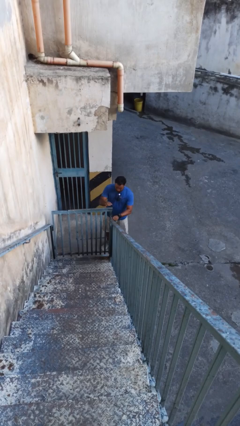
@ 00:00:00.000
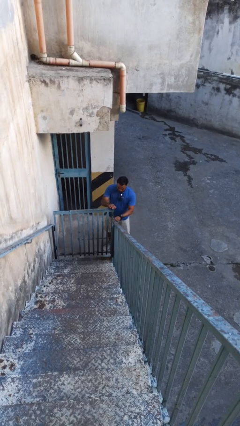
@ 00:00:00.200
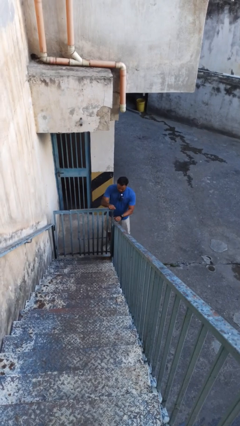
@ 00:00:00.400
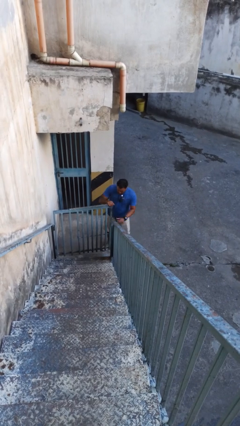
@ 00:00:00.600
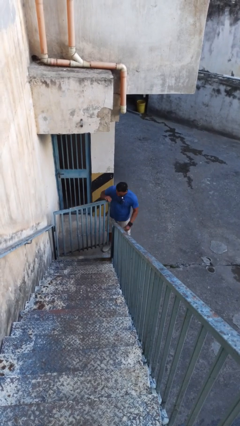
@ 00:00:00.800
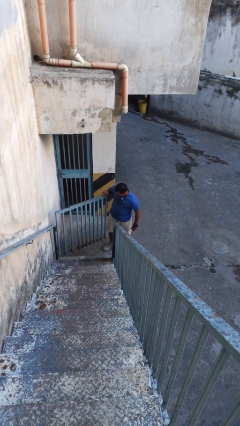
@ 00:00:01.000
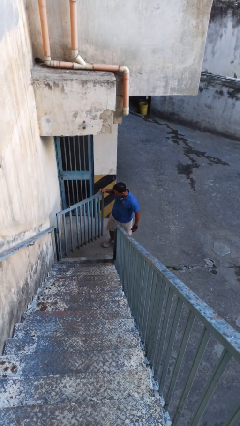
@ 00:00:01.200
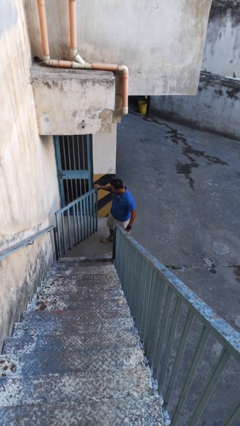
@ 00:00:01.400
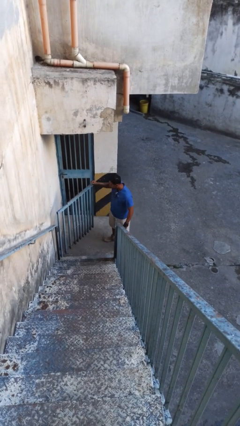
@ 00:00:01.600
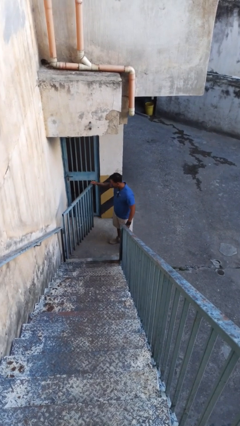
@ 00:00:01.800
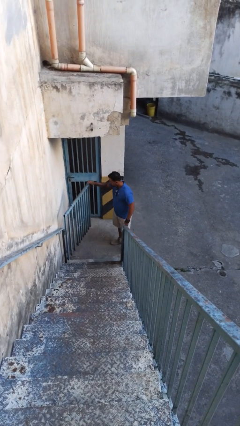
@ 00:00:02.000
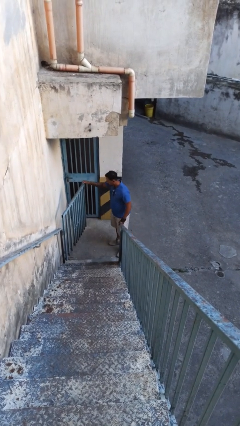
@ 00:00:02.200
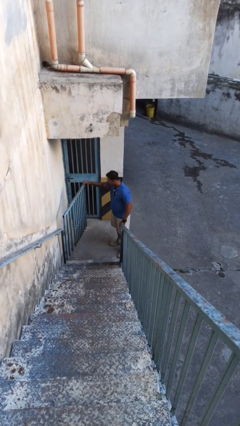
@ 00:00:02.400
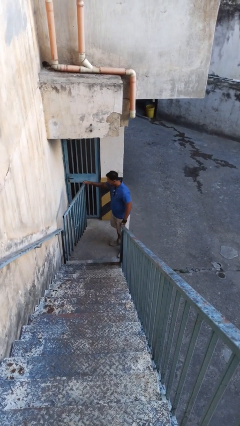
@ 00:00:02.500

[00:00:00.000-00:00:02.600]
person opens facility door

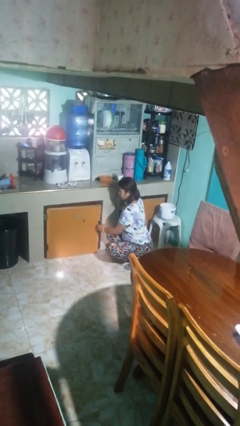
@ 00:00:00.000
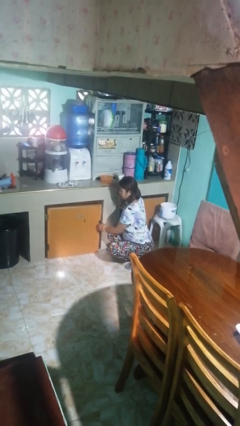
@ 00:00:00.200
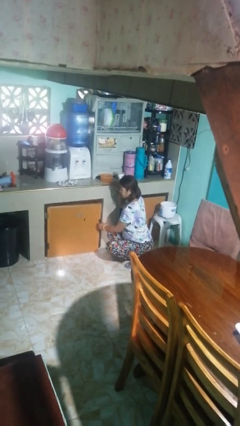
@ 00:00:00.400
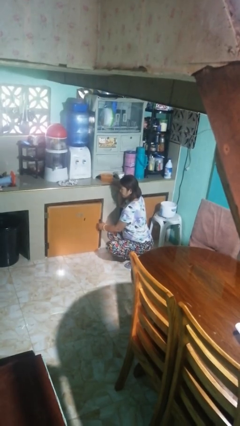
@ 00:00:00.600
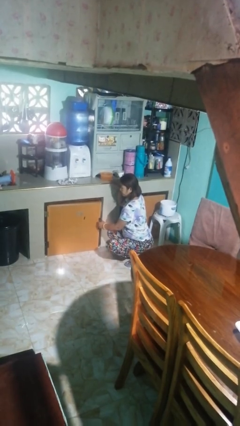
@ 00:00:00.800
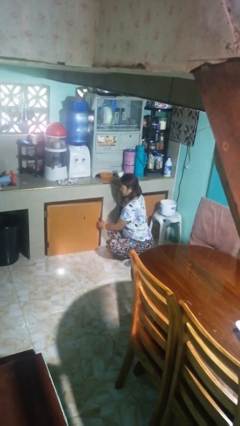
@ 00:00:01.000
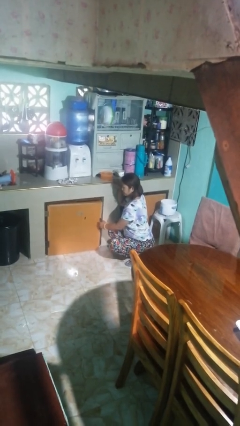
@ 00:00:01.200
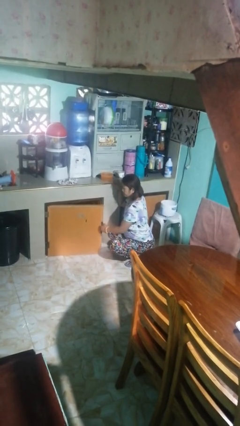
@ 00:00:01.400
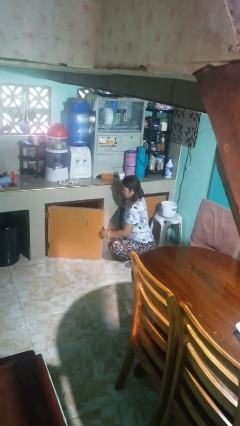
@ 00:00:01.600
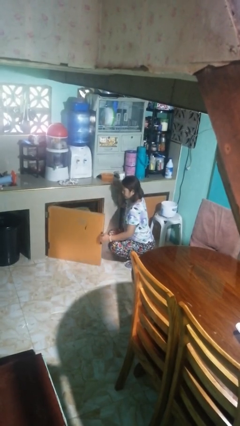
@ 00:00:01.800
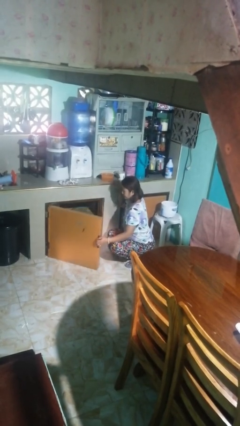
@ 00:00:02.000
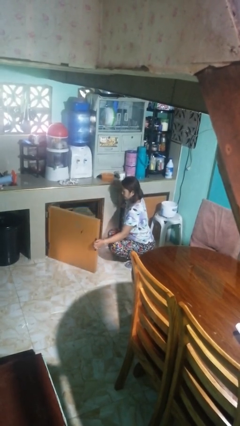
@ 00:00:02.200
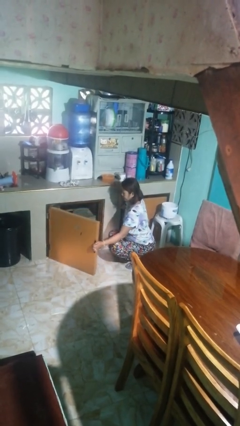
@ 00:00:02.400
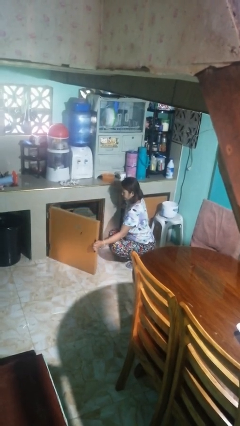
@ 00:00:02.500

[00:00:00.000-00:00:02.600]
person opens cabinet

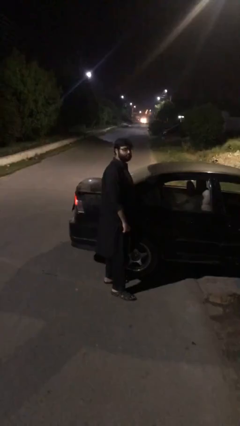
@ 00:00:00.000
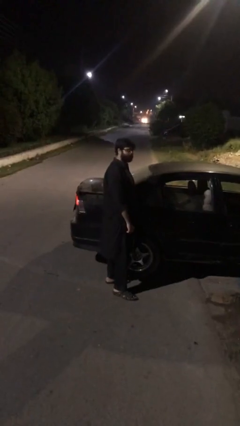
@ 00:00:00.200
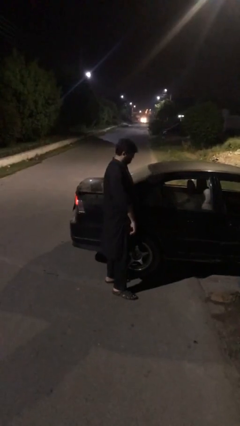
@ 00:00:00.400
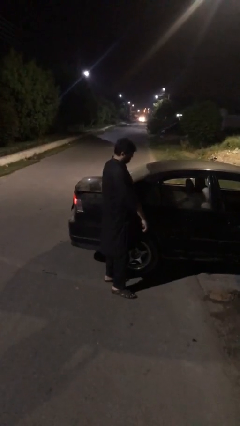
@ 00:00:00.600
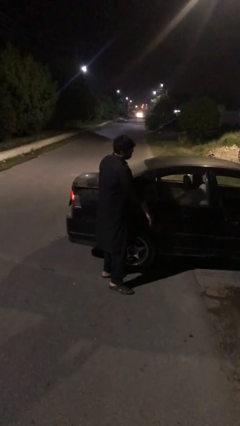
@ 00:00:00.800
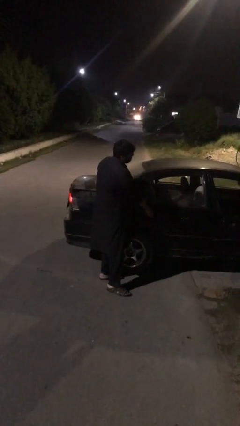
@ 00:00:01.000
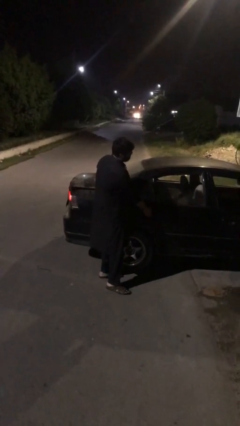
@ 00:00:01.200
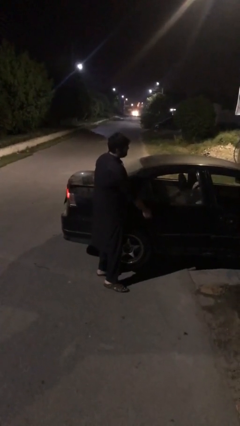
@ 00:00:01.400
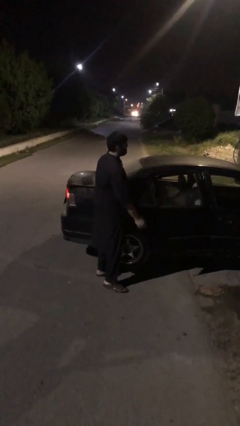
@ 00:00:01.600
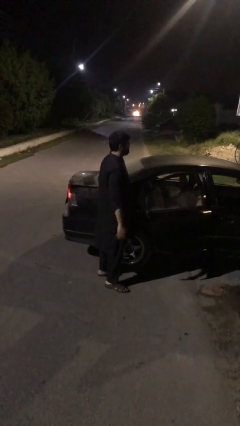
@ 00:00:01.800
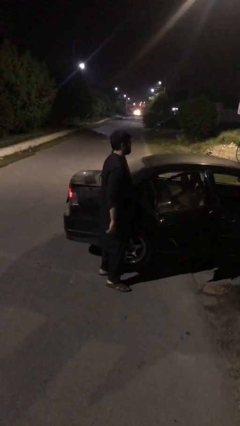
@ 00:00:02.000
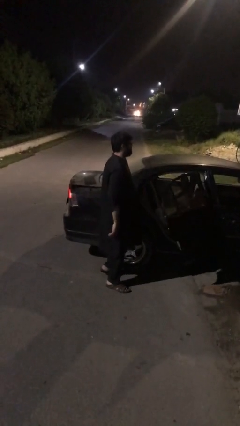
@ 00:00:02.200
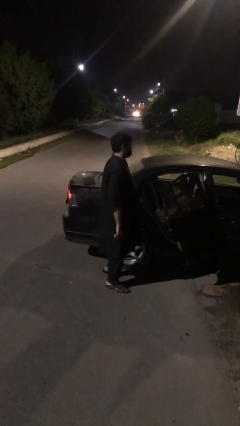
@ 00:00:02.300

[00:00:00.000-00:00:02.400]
person opens car door

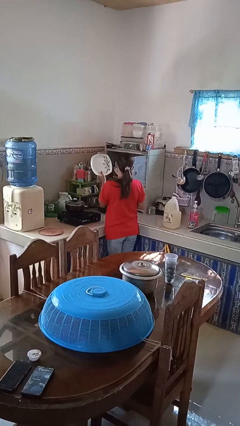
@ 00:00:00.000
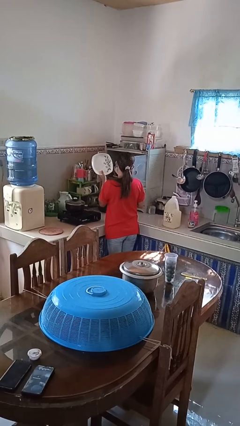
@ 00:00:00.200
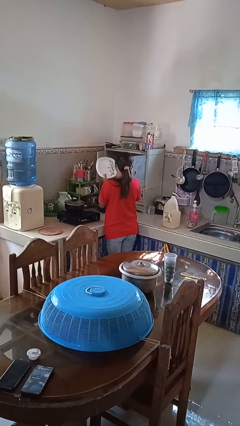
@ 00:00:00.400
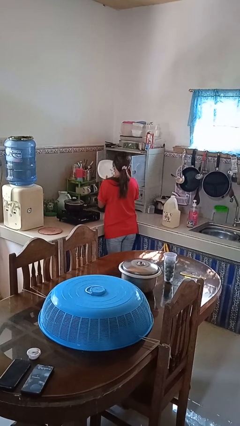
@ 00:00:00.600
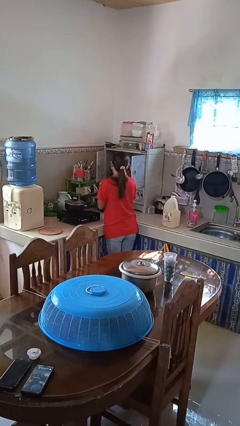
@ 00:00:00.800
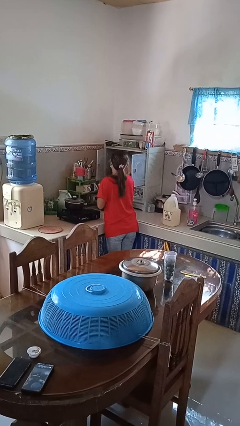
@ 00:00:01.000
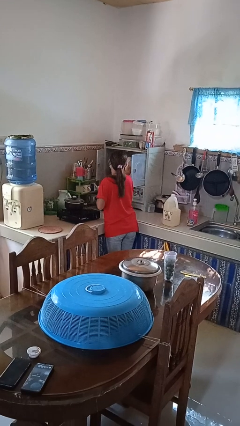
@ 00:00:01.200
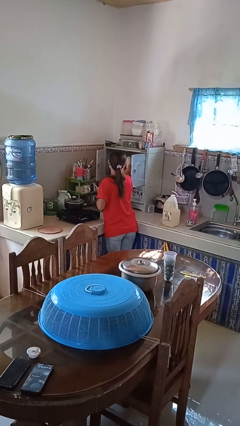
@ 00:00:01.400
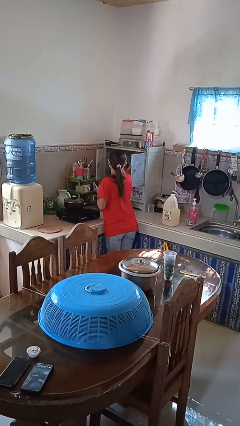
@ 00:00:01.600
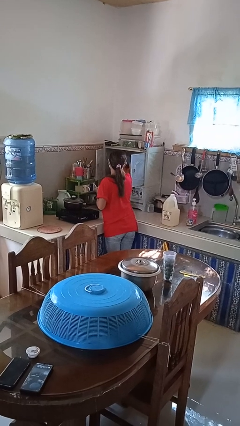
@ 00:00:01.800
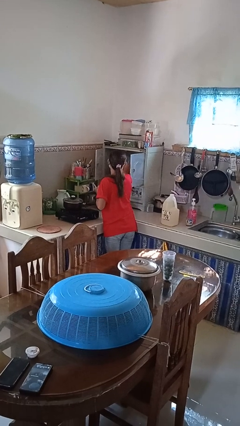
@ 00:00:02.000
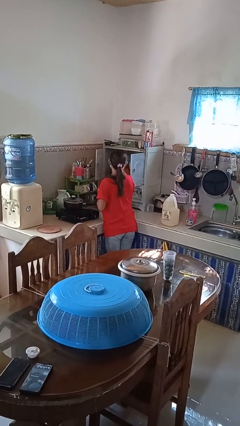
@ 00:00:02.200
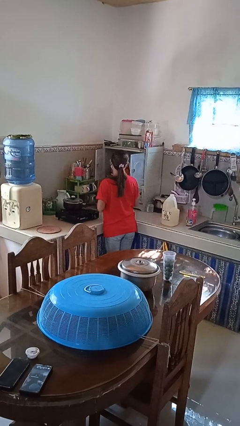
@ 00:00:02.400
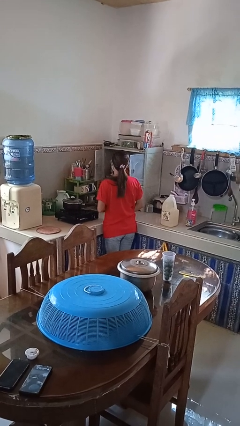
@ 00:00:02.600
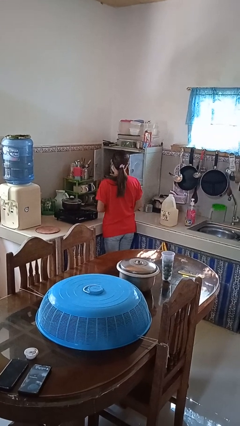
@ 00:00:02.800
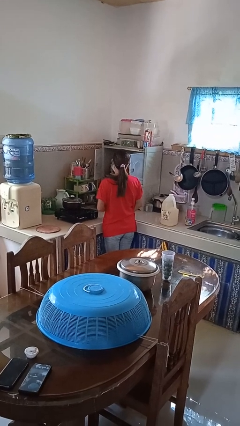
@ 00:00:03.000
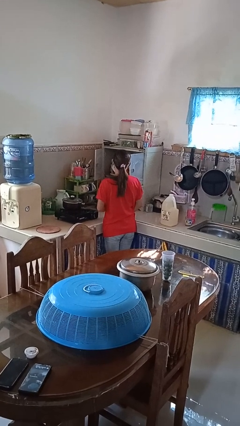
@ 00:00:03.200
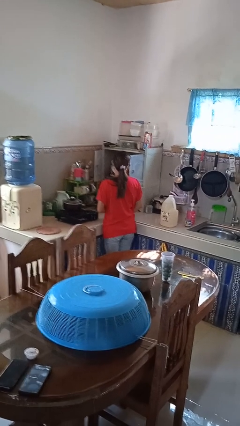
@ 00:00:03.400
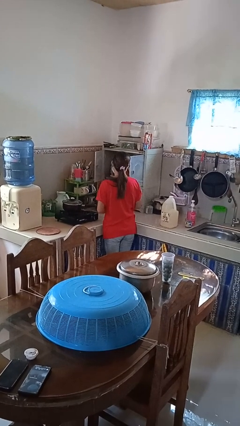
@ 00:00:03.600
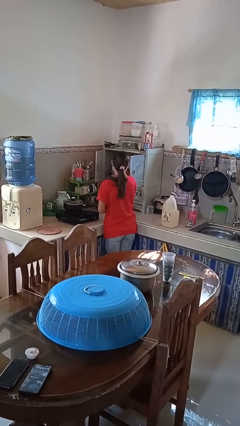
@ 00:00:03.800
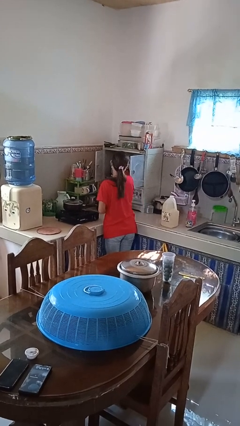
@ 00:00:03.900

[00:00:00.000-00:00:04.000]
person puts object in cabinet

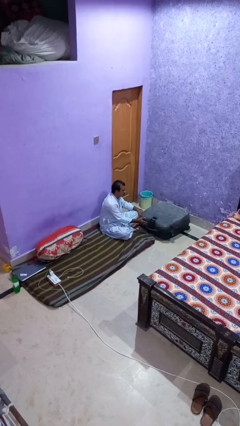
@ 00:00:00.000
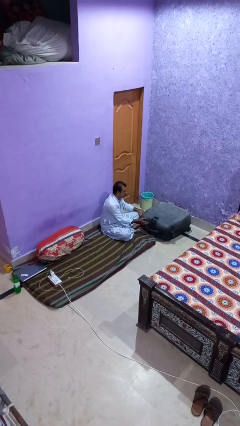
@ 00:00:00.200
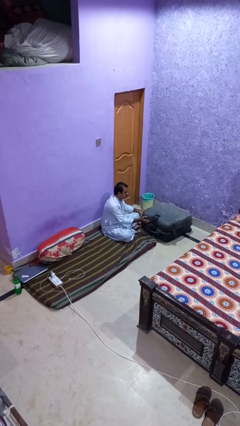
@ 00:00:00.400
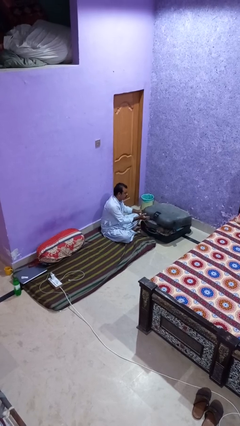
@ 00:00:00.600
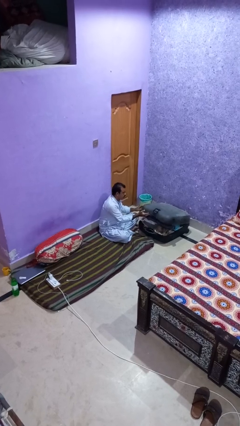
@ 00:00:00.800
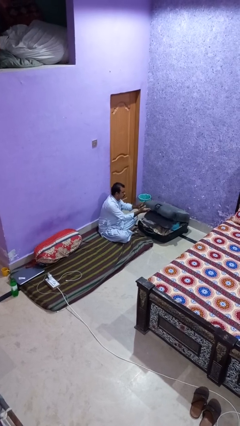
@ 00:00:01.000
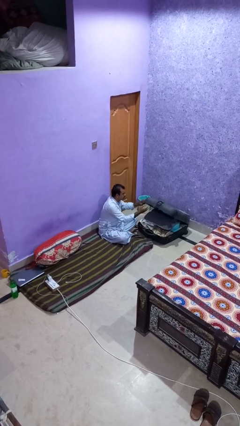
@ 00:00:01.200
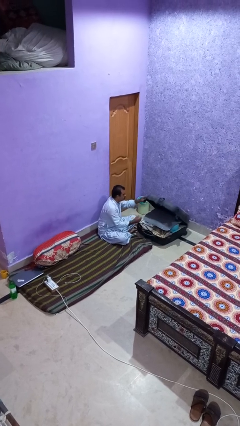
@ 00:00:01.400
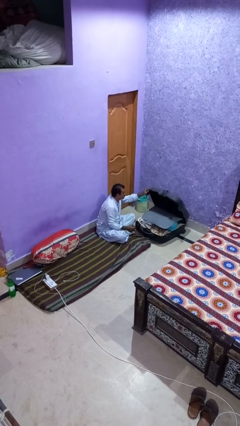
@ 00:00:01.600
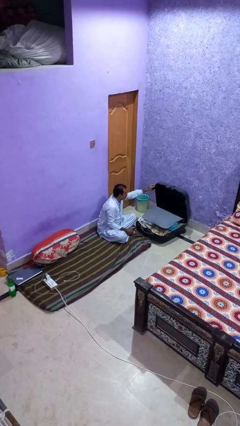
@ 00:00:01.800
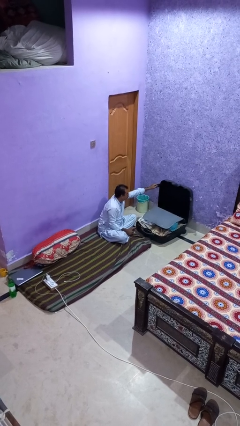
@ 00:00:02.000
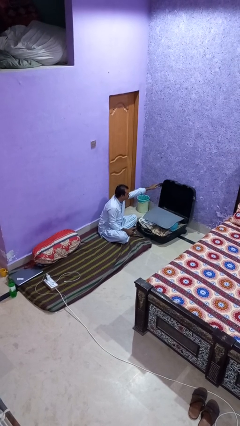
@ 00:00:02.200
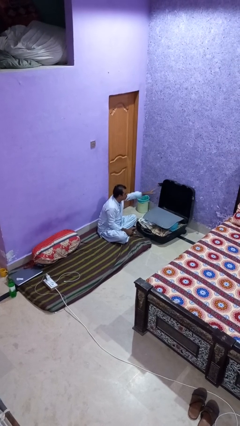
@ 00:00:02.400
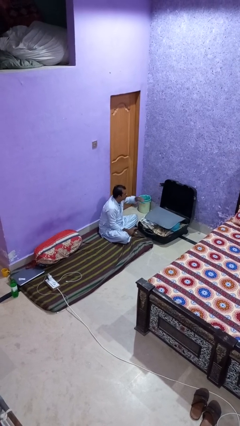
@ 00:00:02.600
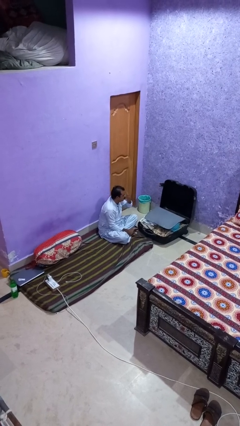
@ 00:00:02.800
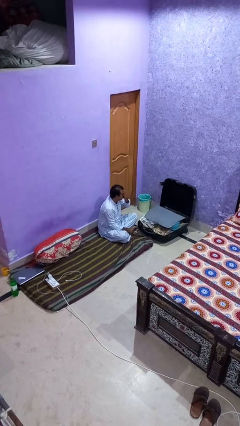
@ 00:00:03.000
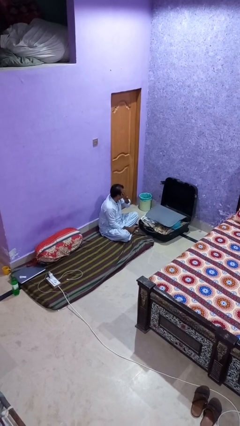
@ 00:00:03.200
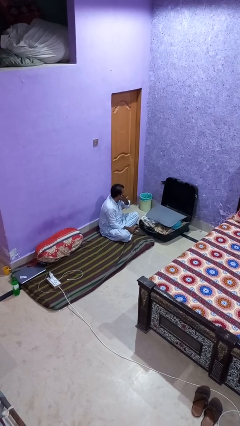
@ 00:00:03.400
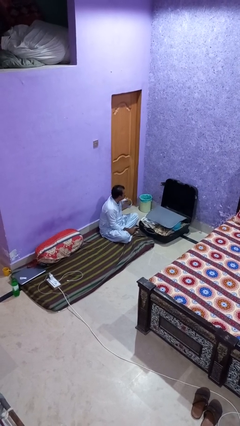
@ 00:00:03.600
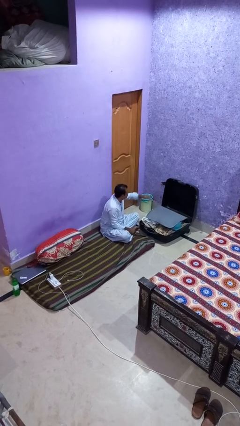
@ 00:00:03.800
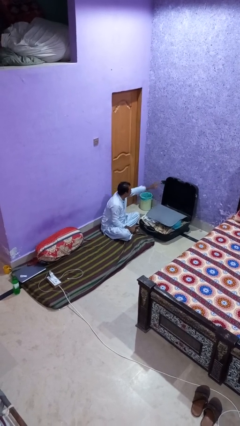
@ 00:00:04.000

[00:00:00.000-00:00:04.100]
person opens suitcase

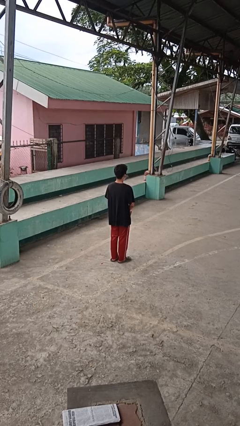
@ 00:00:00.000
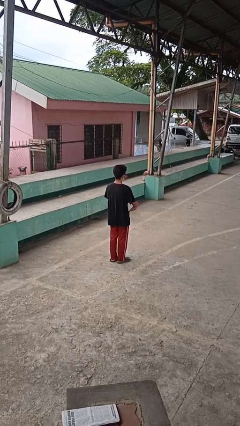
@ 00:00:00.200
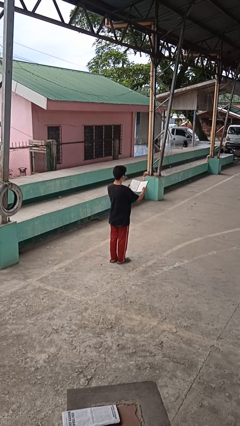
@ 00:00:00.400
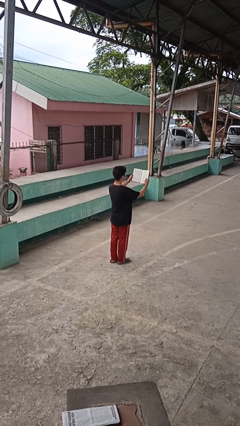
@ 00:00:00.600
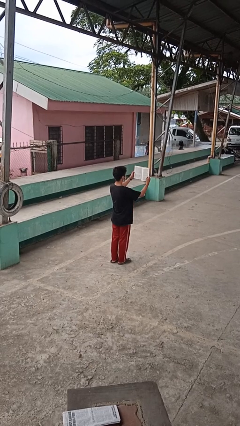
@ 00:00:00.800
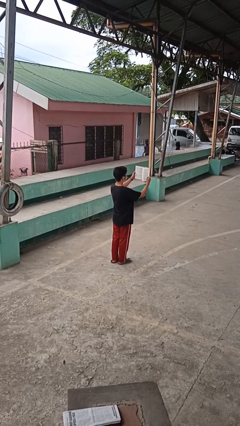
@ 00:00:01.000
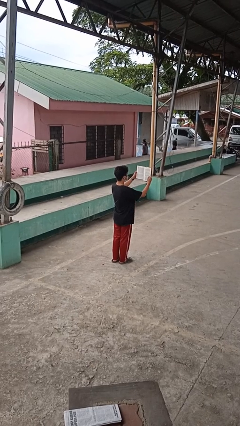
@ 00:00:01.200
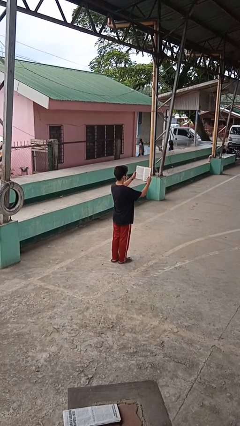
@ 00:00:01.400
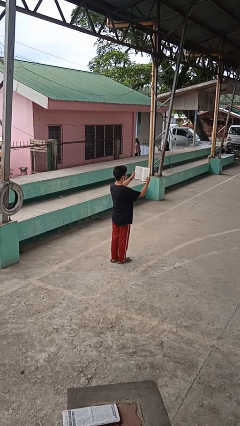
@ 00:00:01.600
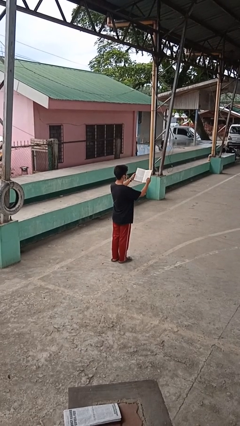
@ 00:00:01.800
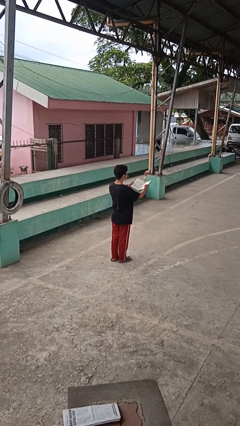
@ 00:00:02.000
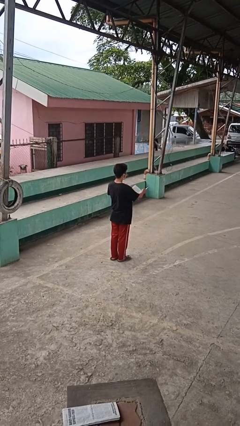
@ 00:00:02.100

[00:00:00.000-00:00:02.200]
person reads book
